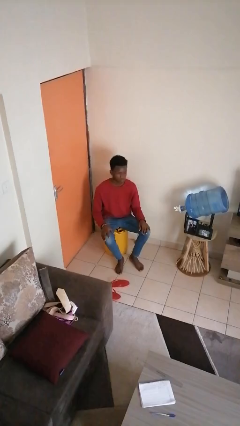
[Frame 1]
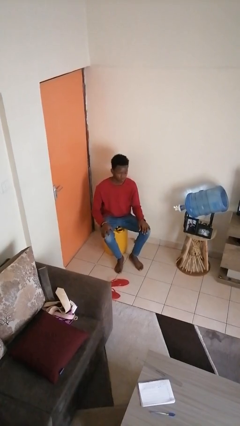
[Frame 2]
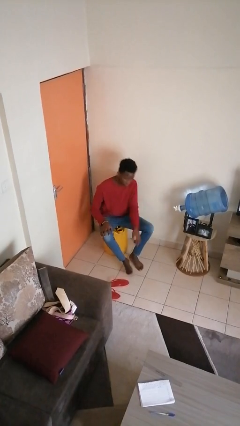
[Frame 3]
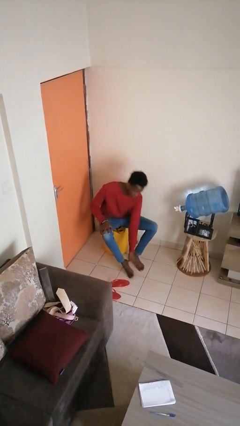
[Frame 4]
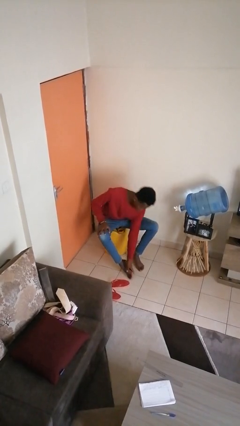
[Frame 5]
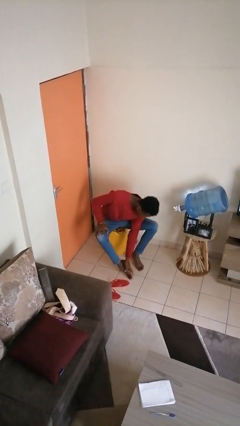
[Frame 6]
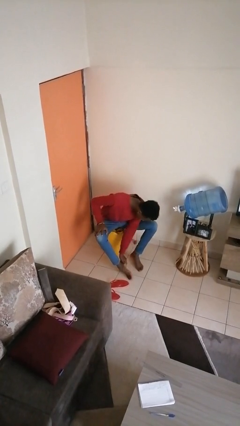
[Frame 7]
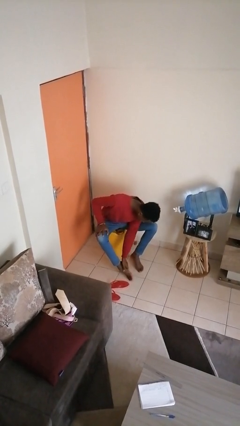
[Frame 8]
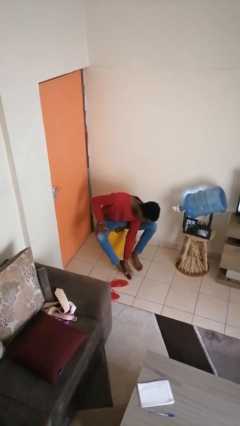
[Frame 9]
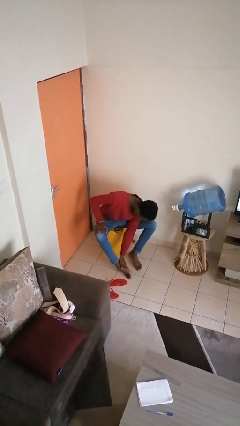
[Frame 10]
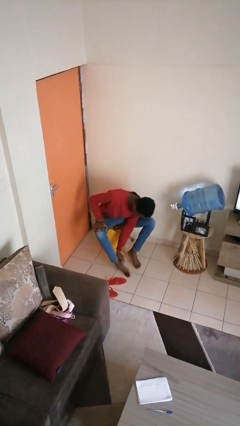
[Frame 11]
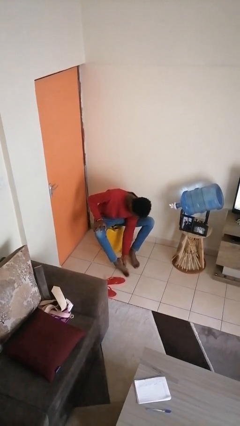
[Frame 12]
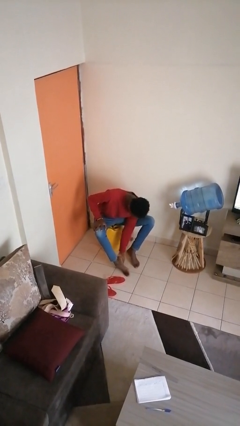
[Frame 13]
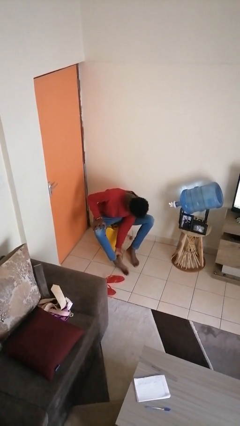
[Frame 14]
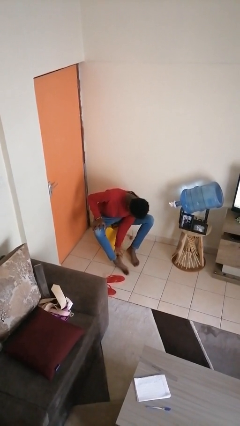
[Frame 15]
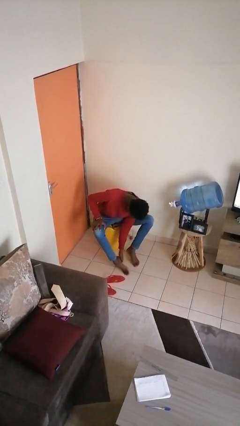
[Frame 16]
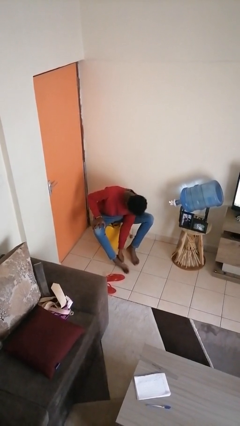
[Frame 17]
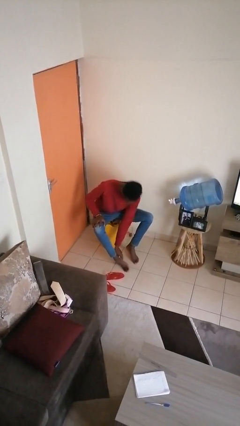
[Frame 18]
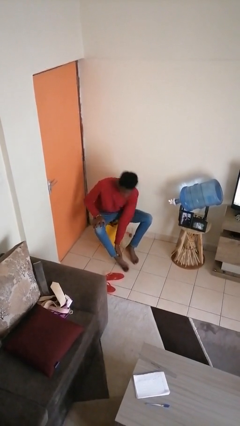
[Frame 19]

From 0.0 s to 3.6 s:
person rubs foot

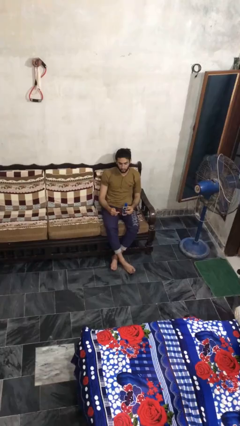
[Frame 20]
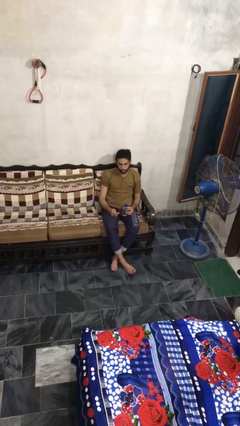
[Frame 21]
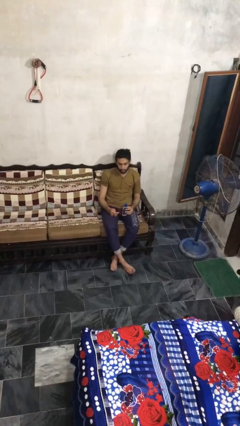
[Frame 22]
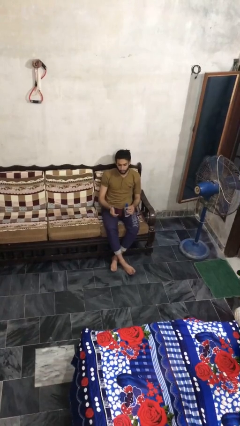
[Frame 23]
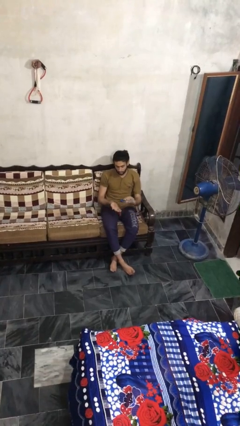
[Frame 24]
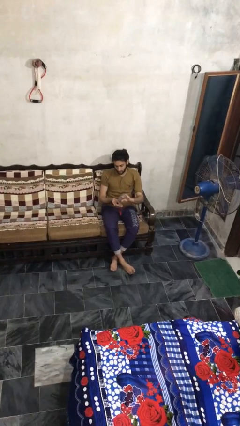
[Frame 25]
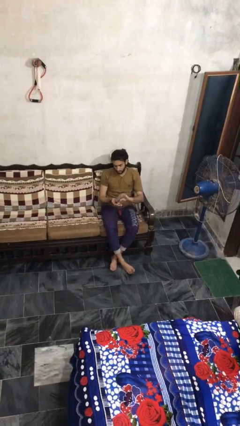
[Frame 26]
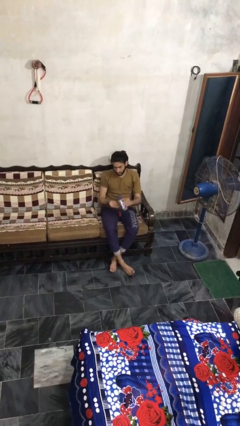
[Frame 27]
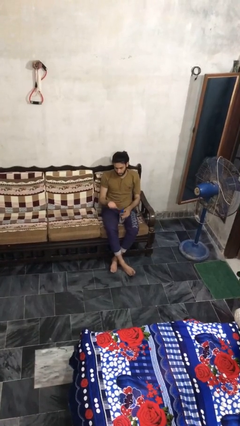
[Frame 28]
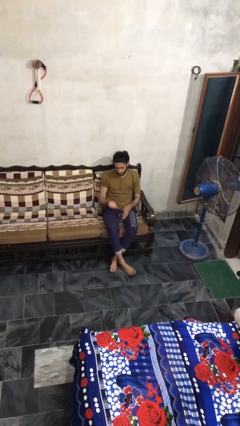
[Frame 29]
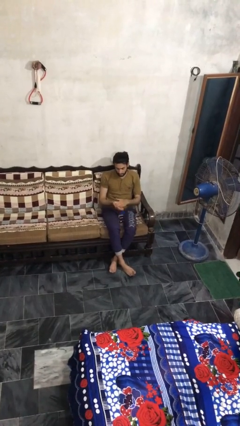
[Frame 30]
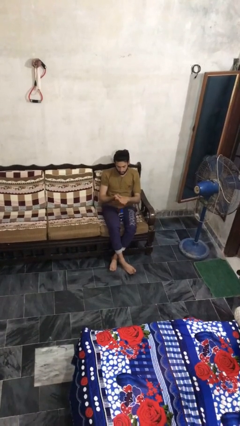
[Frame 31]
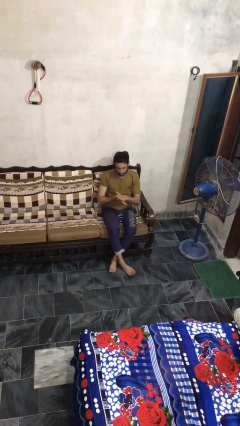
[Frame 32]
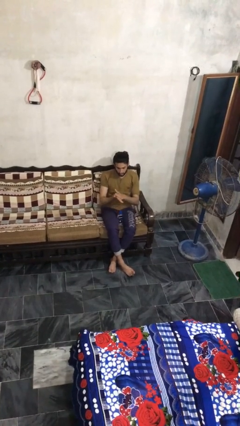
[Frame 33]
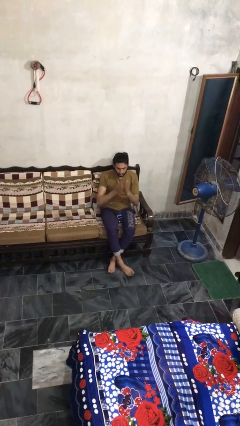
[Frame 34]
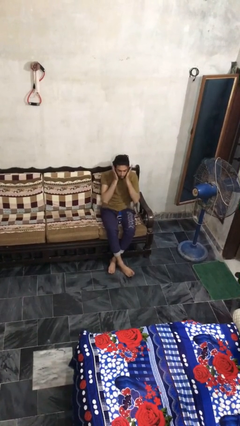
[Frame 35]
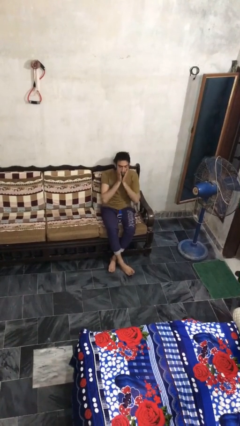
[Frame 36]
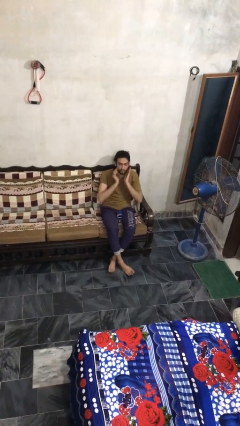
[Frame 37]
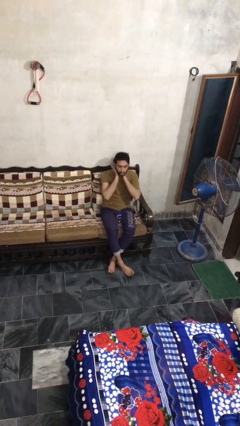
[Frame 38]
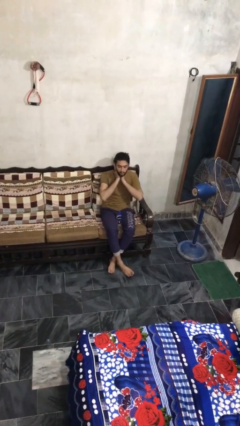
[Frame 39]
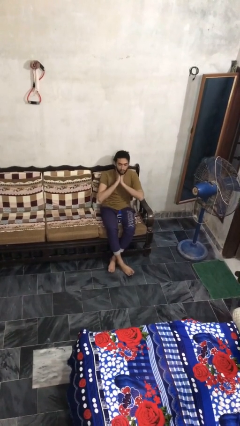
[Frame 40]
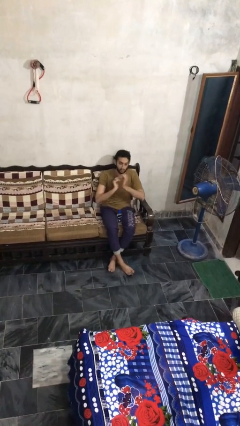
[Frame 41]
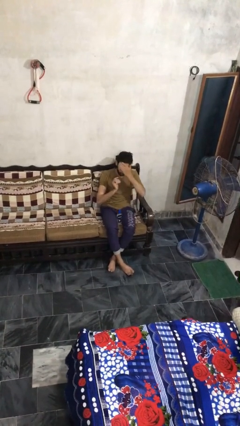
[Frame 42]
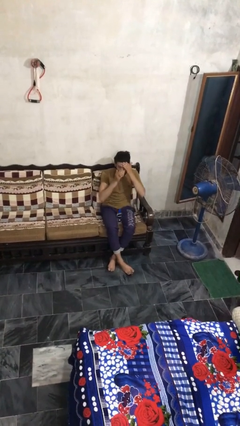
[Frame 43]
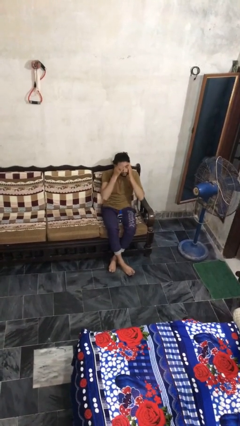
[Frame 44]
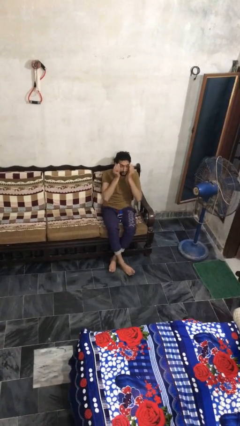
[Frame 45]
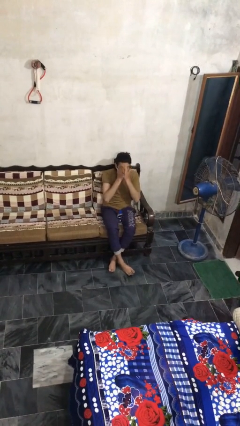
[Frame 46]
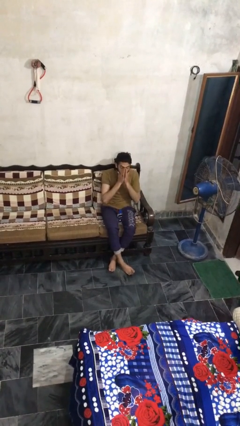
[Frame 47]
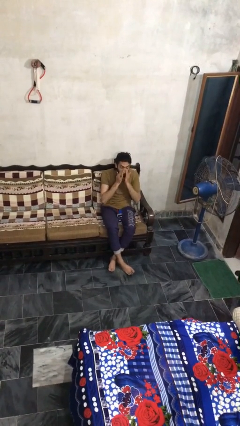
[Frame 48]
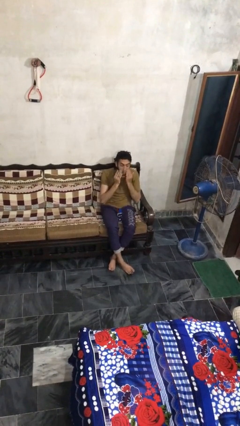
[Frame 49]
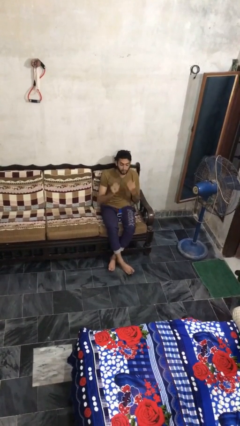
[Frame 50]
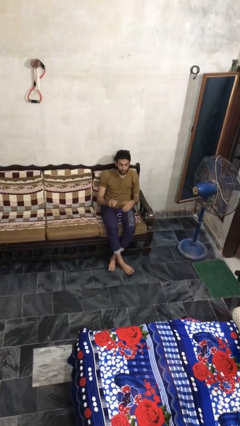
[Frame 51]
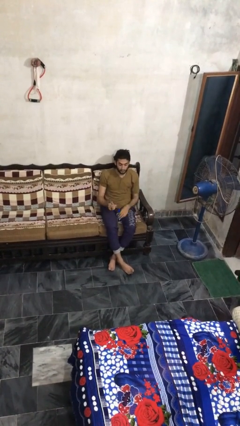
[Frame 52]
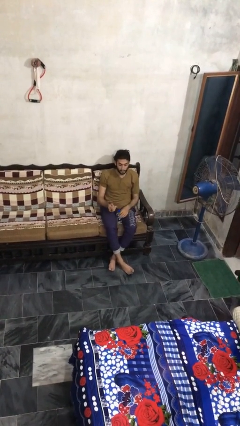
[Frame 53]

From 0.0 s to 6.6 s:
person applies facial moisturizer

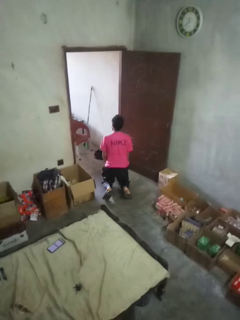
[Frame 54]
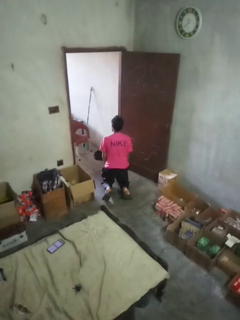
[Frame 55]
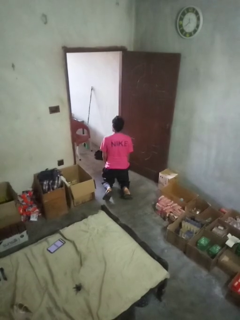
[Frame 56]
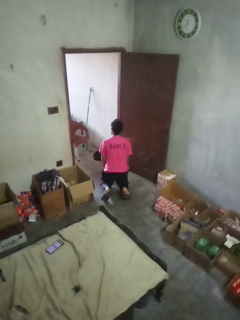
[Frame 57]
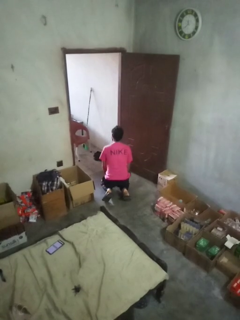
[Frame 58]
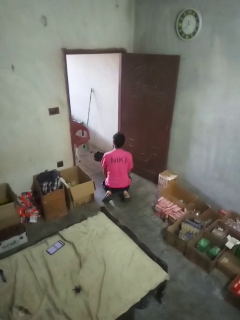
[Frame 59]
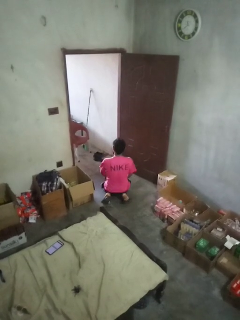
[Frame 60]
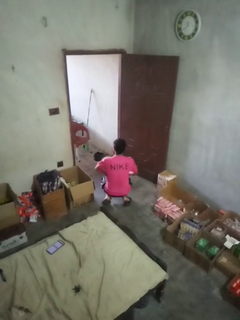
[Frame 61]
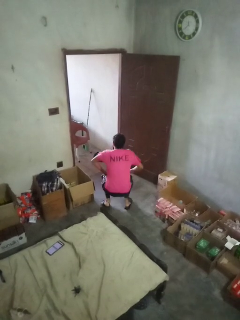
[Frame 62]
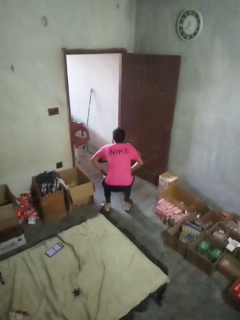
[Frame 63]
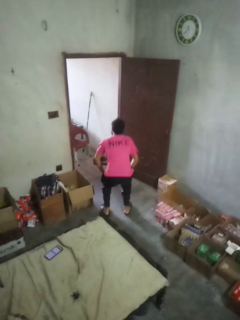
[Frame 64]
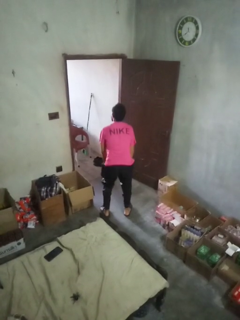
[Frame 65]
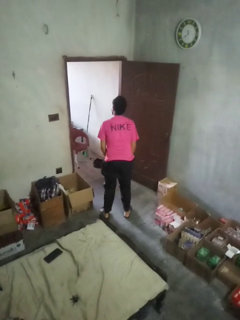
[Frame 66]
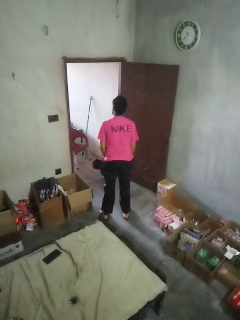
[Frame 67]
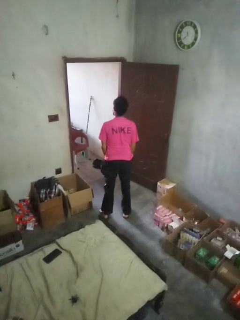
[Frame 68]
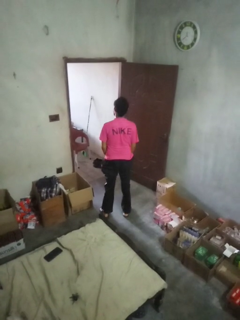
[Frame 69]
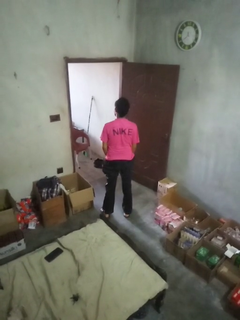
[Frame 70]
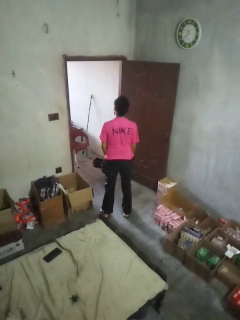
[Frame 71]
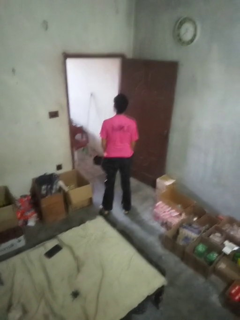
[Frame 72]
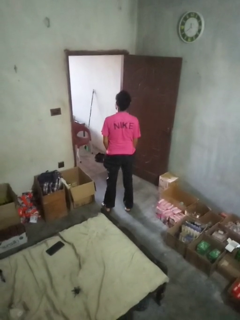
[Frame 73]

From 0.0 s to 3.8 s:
person stands up from floor

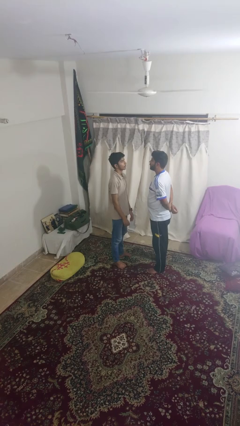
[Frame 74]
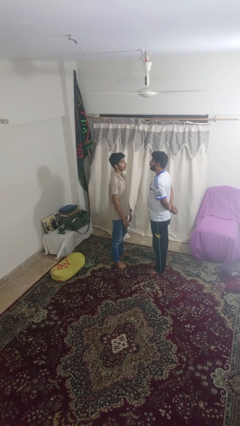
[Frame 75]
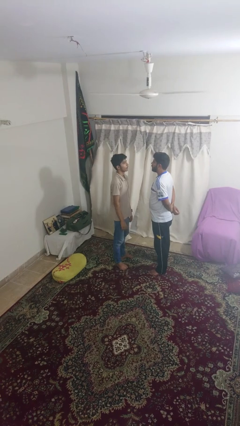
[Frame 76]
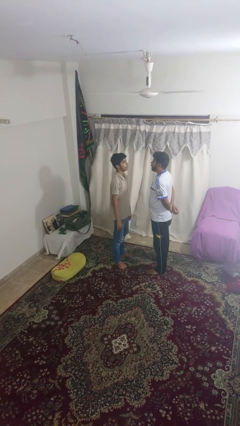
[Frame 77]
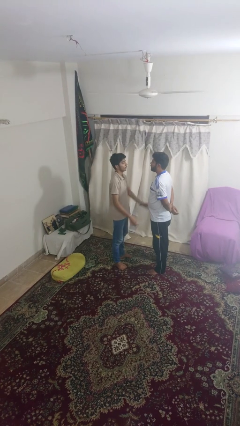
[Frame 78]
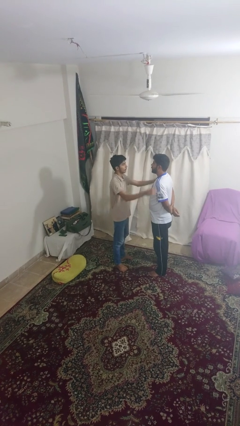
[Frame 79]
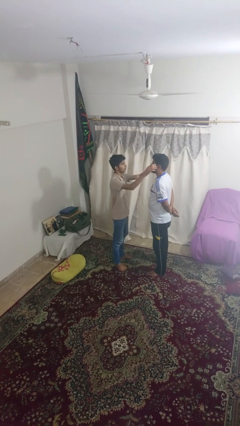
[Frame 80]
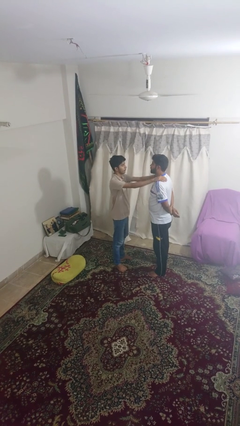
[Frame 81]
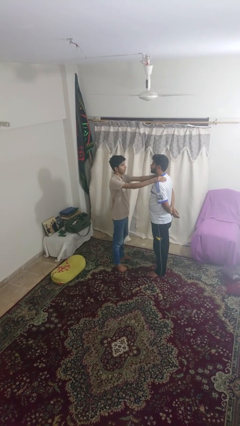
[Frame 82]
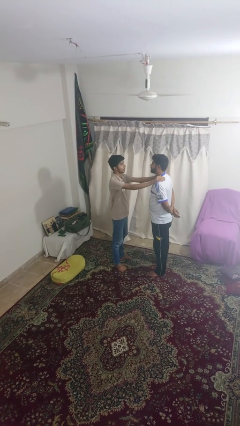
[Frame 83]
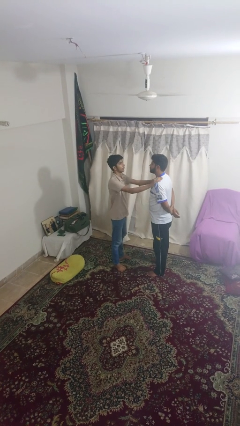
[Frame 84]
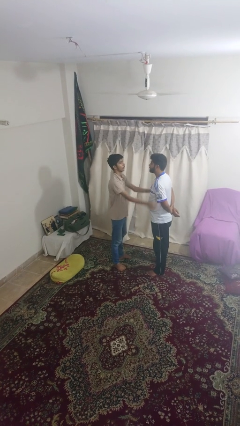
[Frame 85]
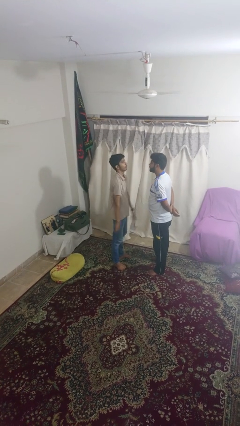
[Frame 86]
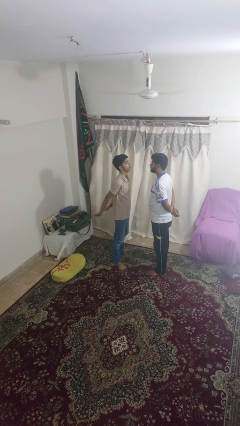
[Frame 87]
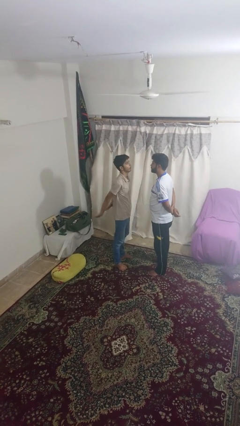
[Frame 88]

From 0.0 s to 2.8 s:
person pounds shoulders of person

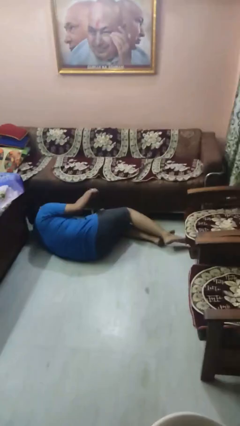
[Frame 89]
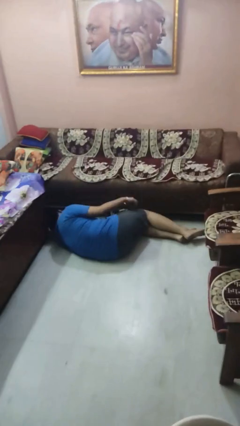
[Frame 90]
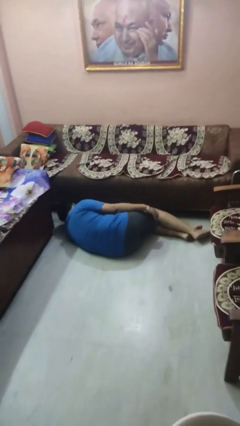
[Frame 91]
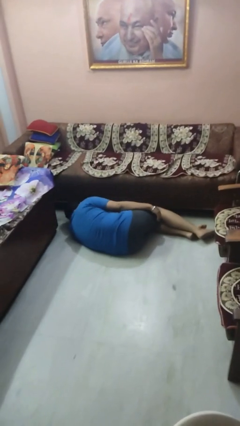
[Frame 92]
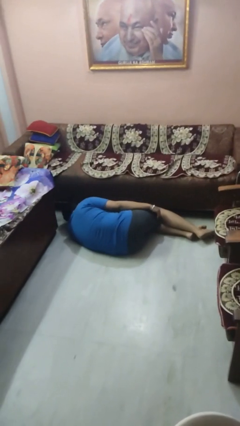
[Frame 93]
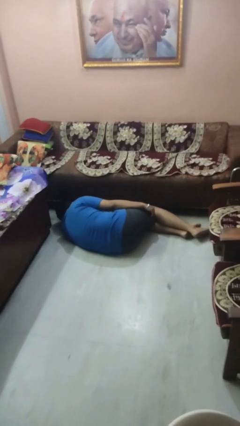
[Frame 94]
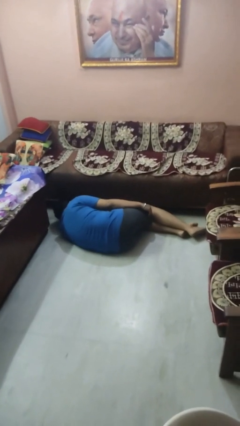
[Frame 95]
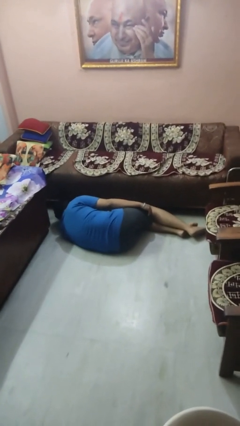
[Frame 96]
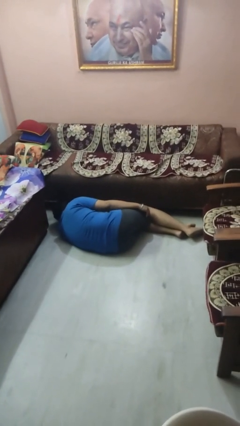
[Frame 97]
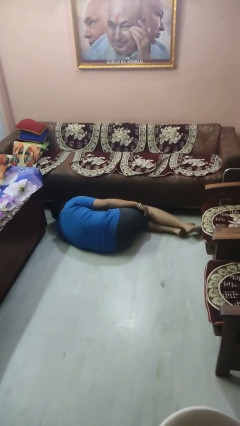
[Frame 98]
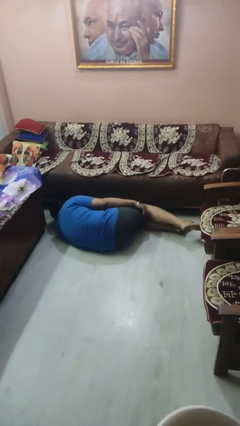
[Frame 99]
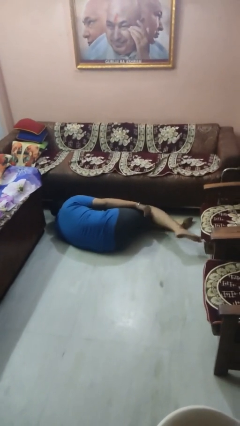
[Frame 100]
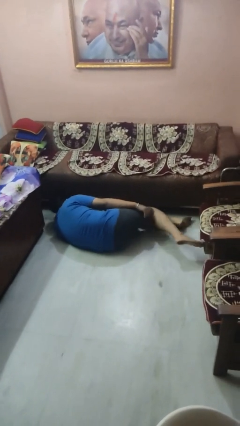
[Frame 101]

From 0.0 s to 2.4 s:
person lies down on floor
